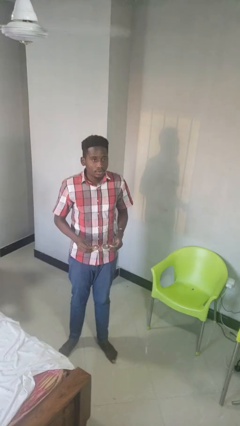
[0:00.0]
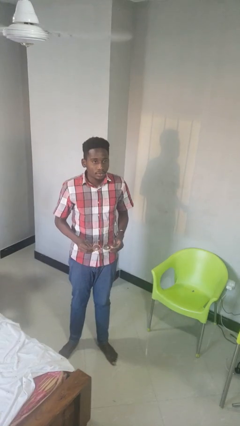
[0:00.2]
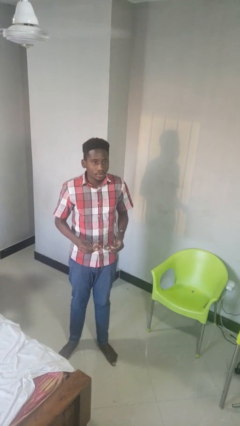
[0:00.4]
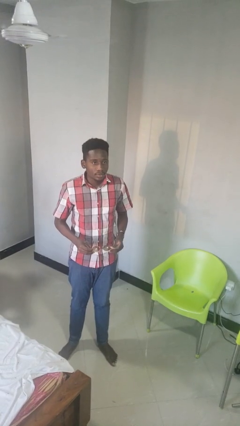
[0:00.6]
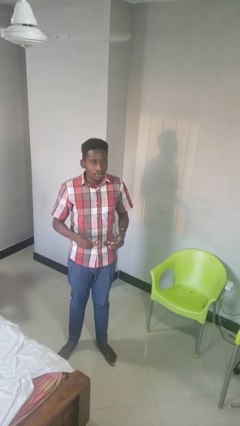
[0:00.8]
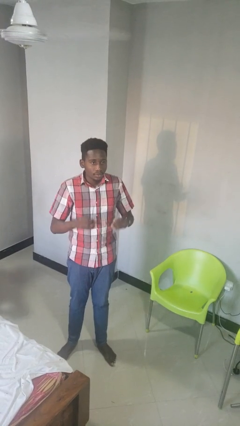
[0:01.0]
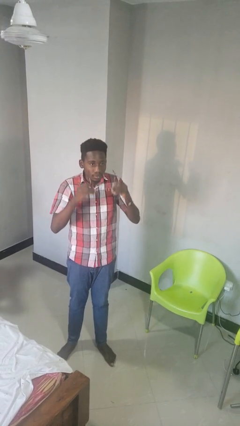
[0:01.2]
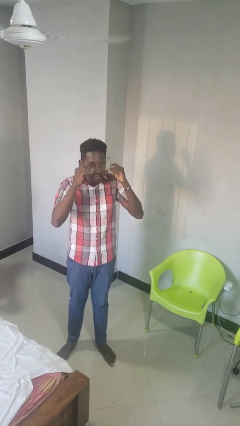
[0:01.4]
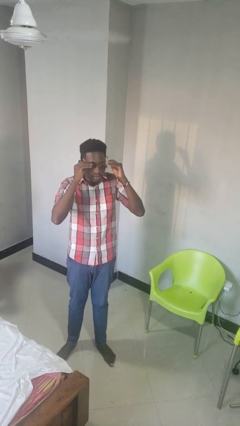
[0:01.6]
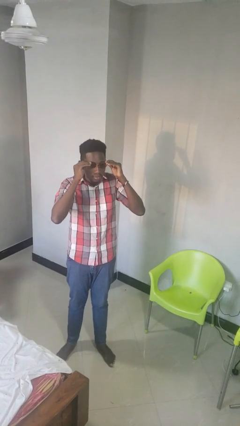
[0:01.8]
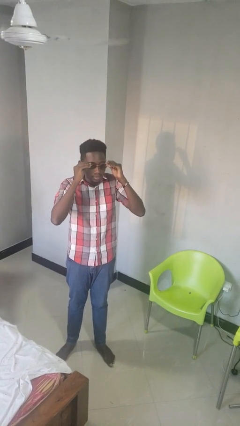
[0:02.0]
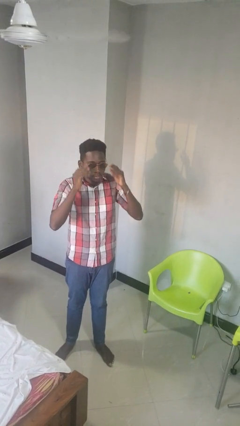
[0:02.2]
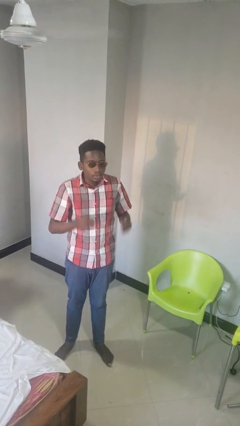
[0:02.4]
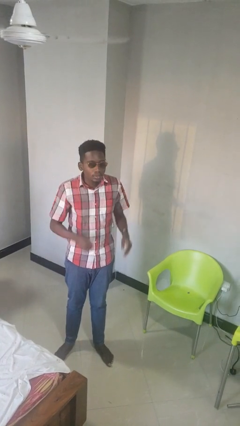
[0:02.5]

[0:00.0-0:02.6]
person puts on sunglasses

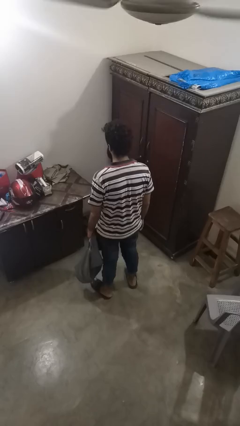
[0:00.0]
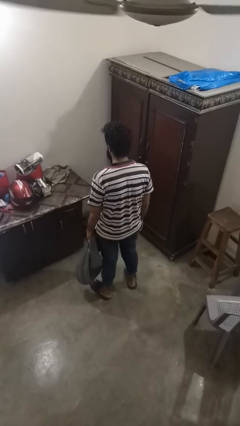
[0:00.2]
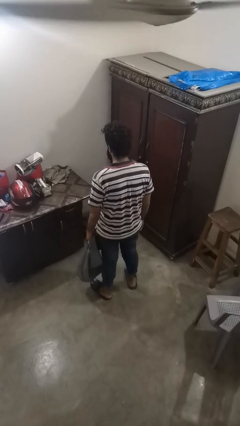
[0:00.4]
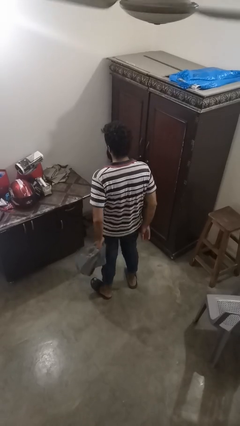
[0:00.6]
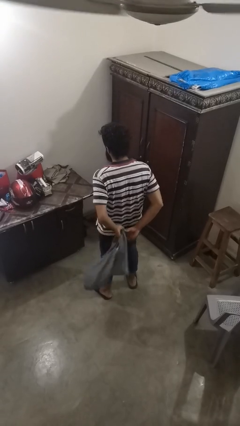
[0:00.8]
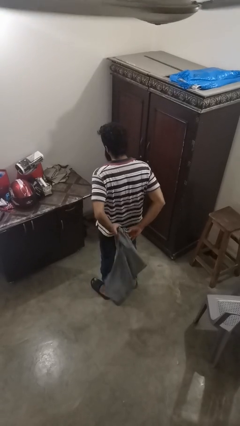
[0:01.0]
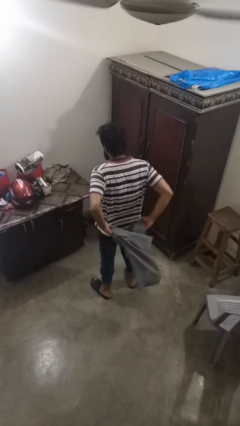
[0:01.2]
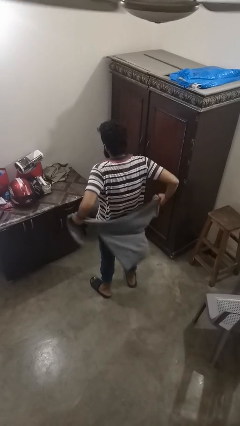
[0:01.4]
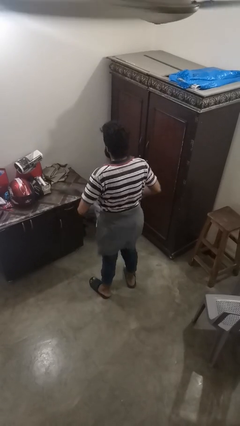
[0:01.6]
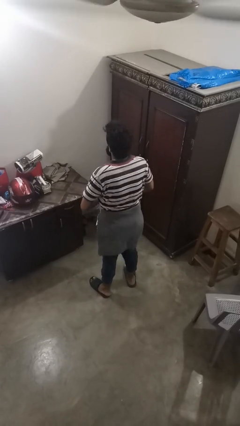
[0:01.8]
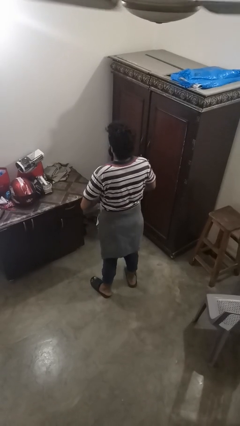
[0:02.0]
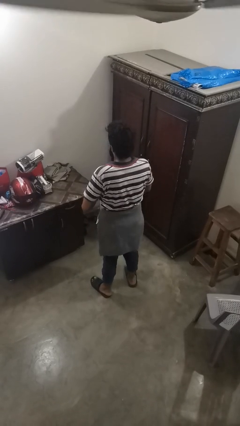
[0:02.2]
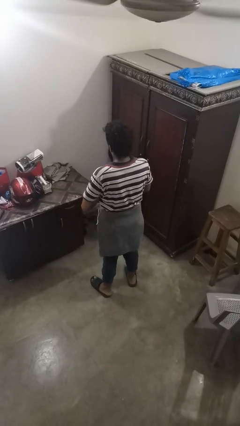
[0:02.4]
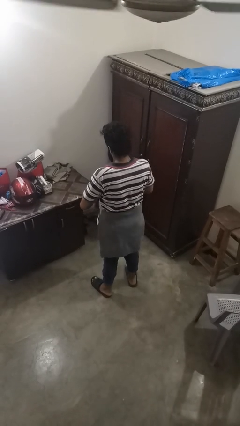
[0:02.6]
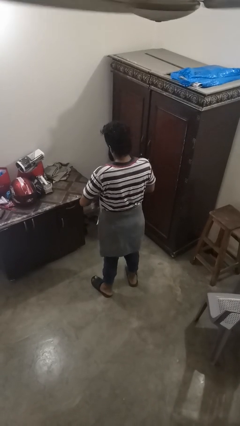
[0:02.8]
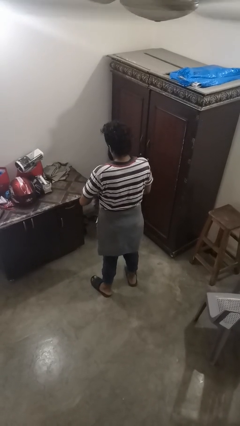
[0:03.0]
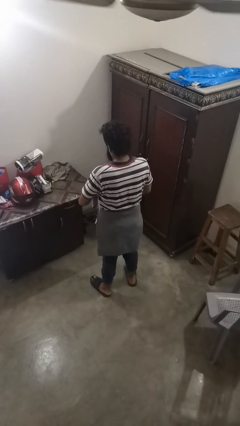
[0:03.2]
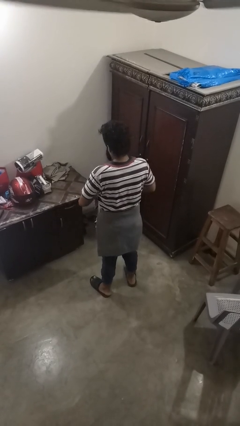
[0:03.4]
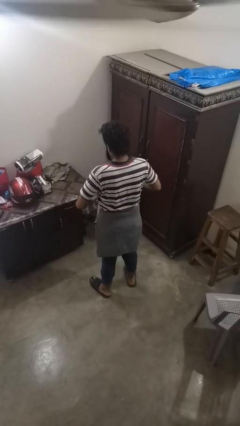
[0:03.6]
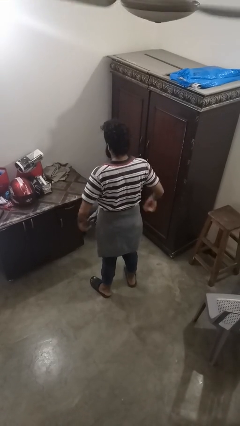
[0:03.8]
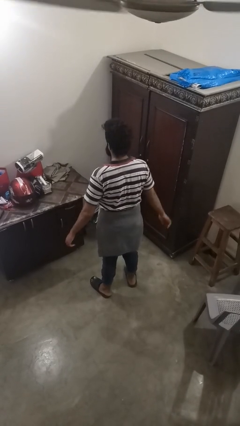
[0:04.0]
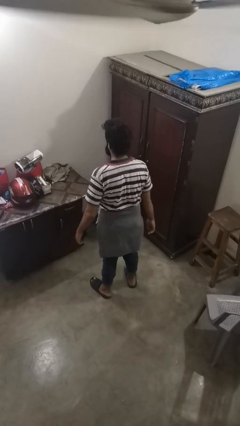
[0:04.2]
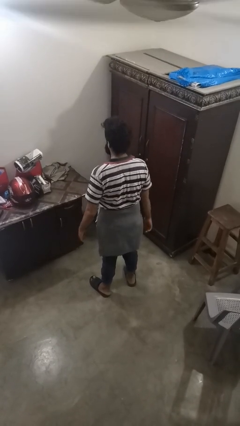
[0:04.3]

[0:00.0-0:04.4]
person ties jacket around waist

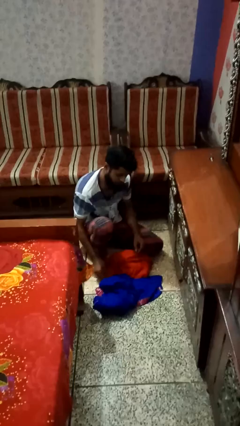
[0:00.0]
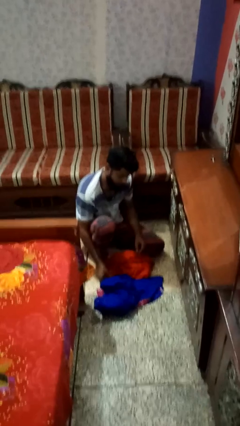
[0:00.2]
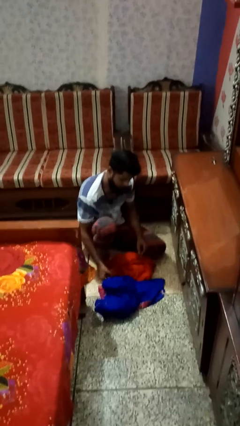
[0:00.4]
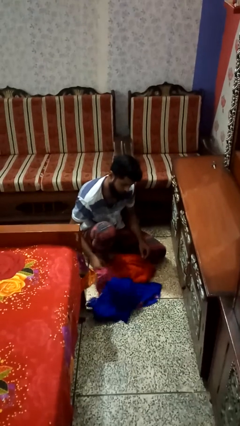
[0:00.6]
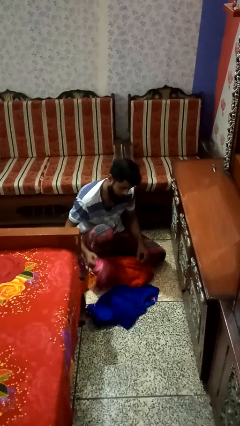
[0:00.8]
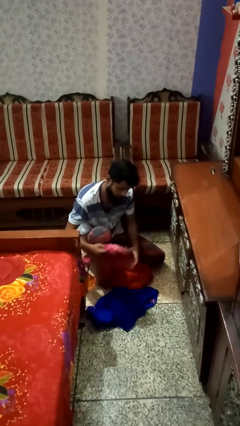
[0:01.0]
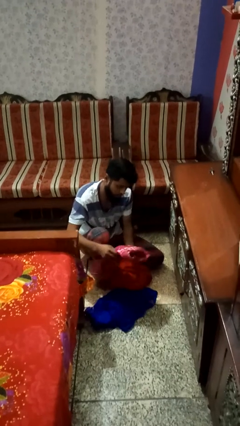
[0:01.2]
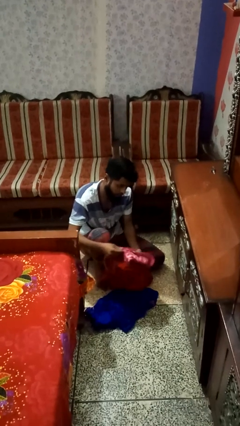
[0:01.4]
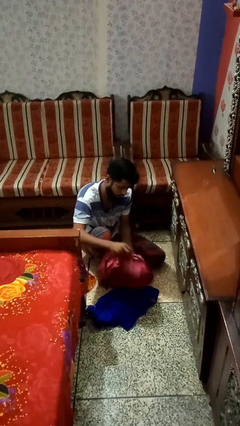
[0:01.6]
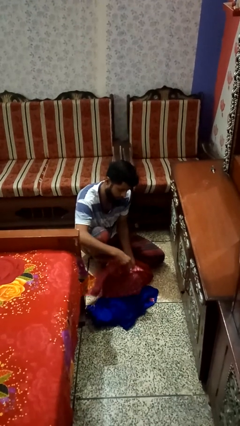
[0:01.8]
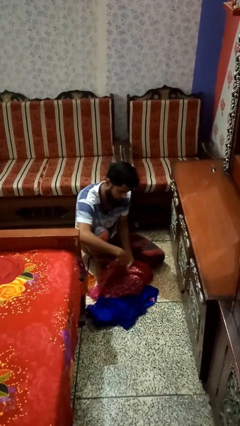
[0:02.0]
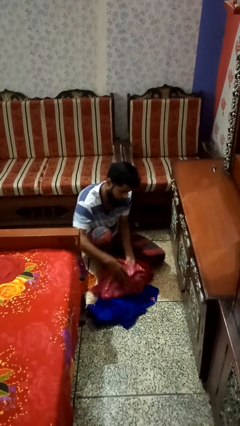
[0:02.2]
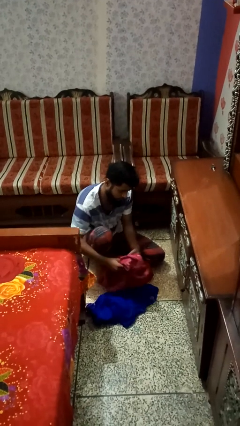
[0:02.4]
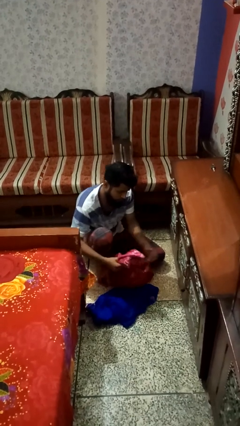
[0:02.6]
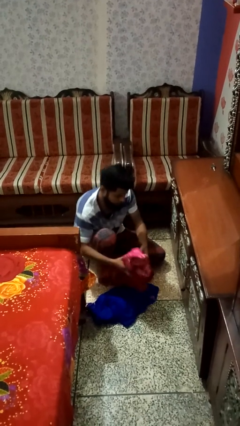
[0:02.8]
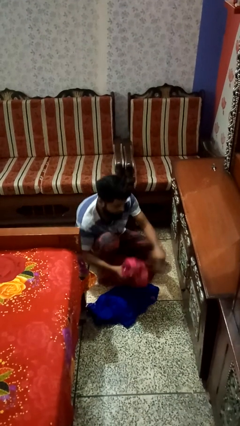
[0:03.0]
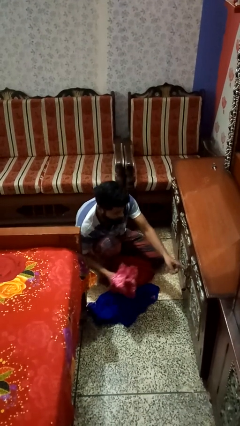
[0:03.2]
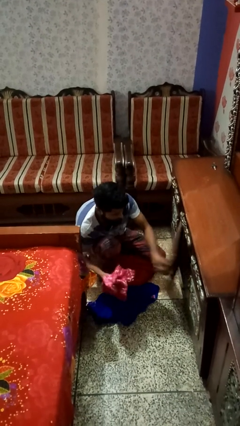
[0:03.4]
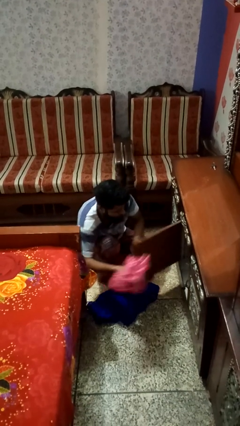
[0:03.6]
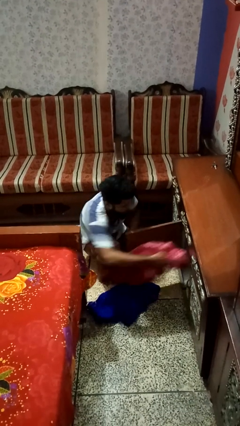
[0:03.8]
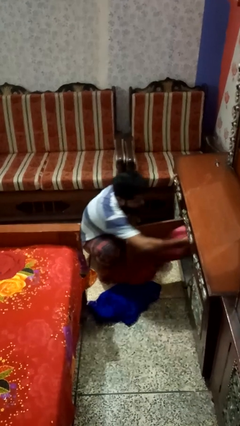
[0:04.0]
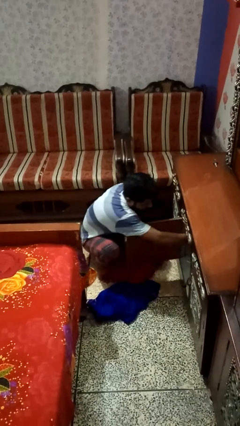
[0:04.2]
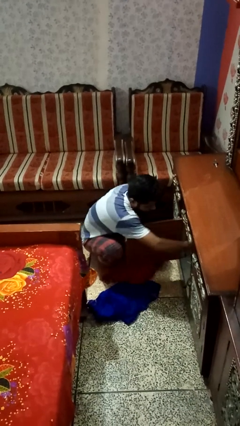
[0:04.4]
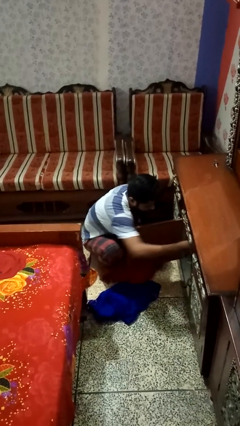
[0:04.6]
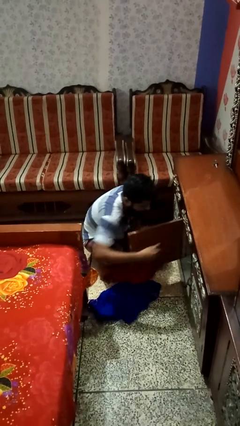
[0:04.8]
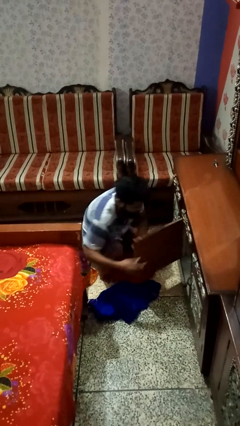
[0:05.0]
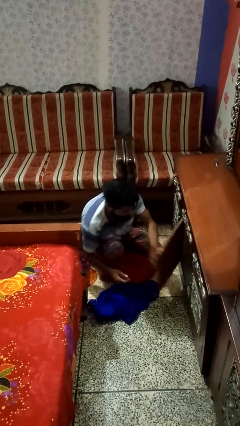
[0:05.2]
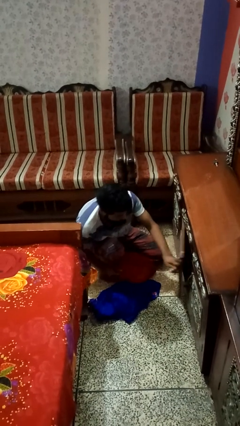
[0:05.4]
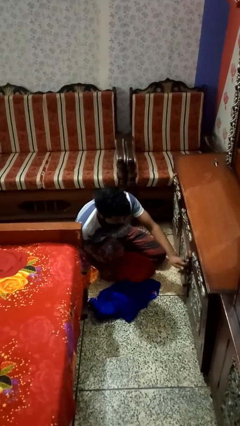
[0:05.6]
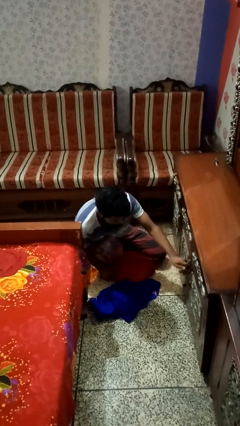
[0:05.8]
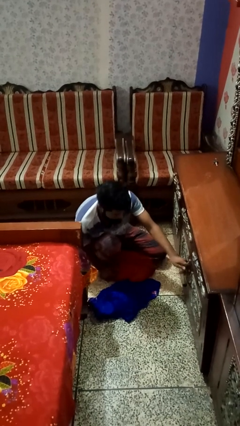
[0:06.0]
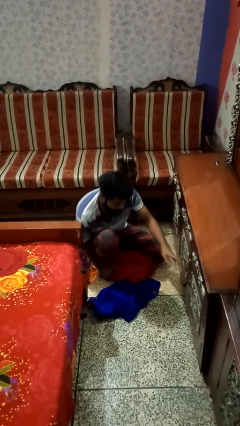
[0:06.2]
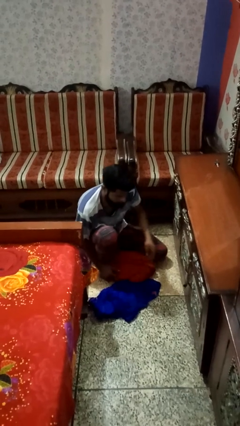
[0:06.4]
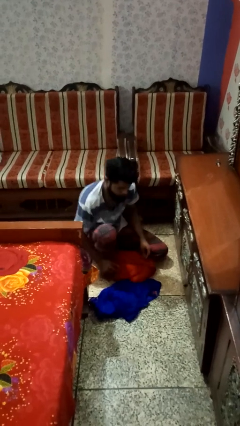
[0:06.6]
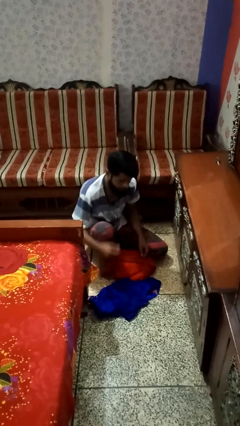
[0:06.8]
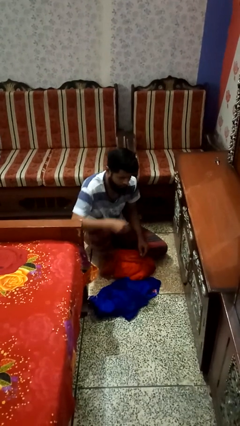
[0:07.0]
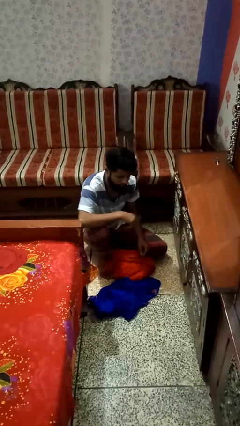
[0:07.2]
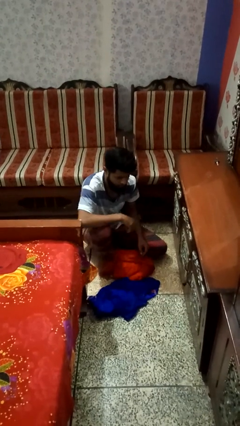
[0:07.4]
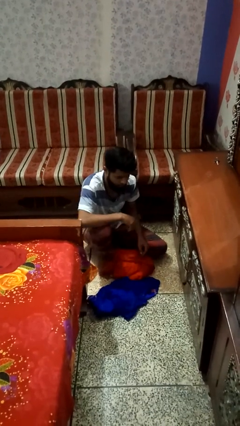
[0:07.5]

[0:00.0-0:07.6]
person puts clothes into dresser

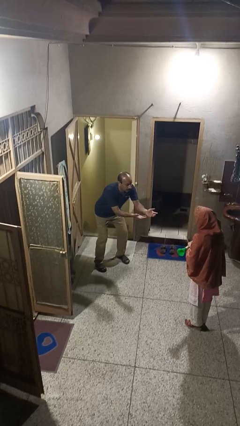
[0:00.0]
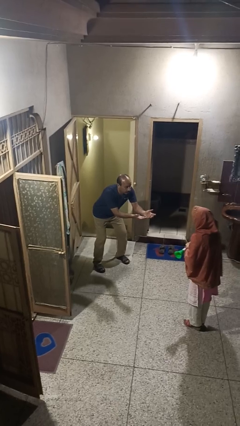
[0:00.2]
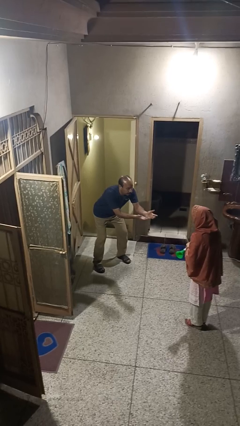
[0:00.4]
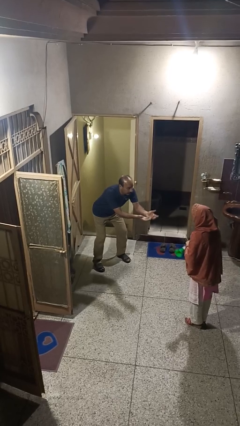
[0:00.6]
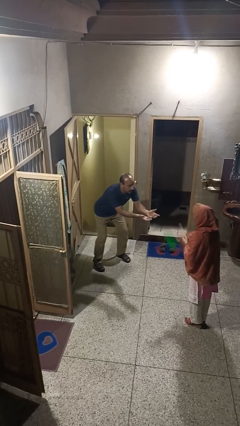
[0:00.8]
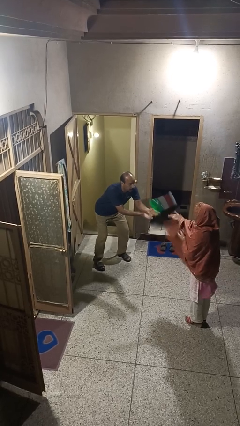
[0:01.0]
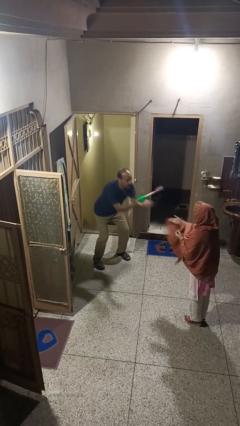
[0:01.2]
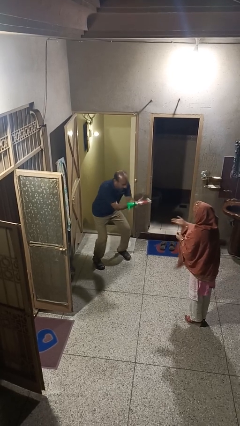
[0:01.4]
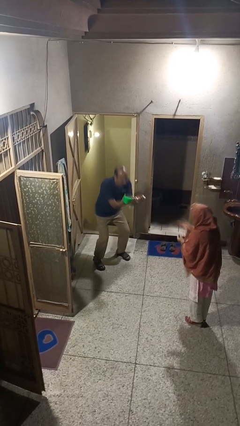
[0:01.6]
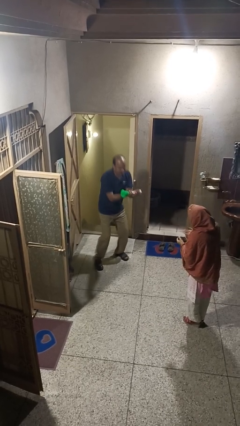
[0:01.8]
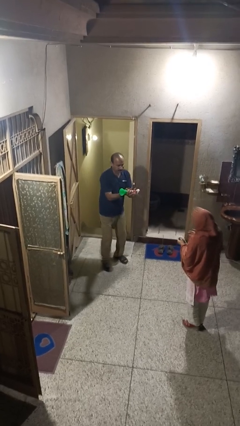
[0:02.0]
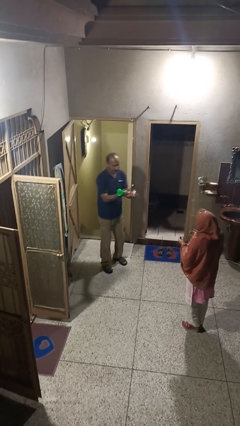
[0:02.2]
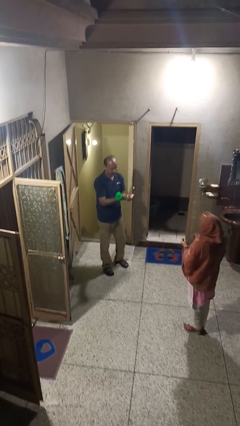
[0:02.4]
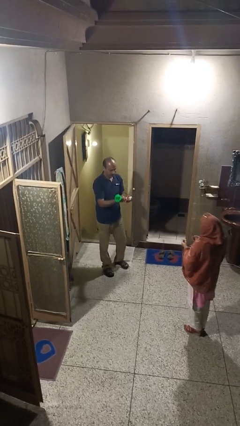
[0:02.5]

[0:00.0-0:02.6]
person catches object from person

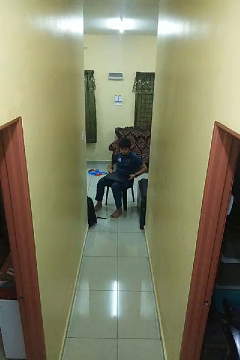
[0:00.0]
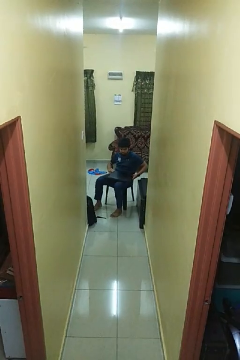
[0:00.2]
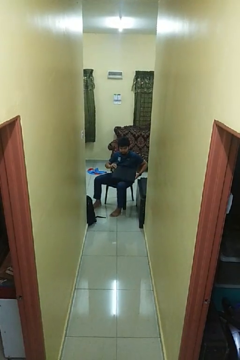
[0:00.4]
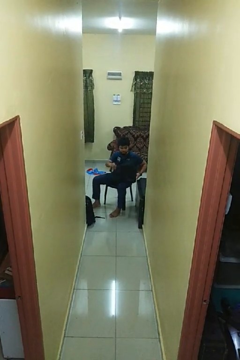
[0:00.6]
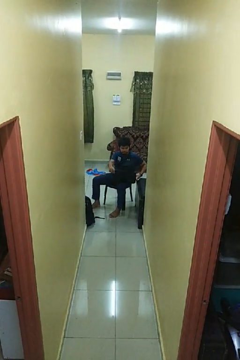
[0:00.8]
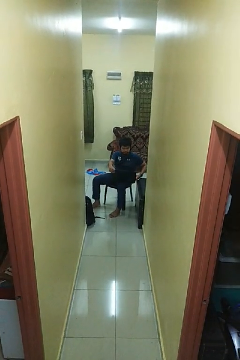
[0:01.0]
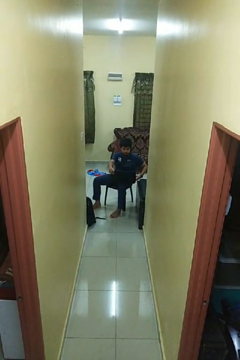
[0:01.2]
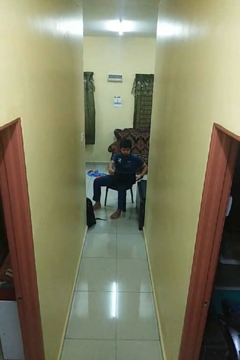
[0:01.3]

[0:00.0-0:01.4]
person opens laptop
